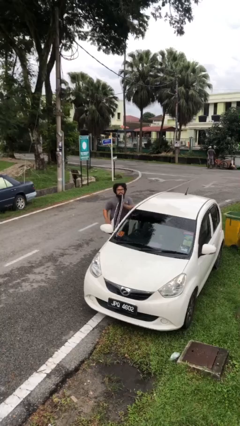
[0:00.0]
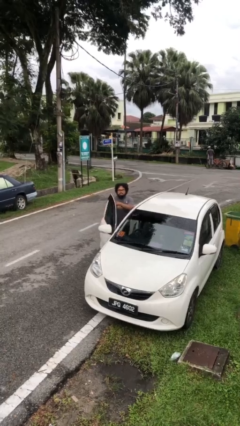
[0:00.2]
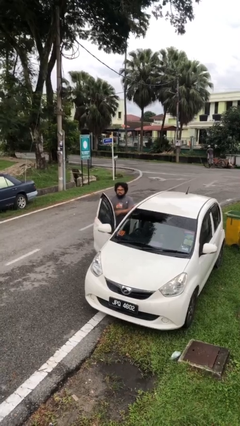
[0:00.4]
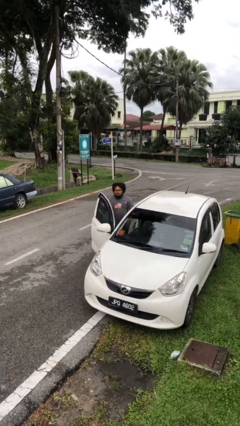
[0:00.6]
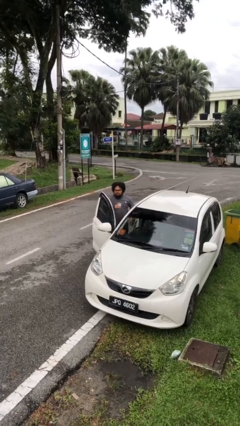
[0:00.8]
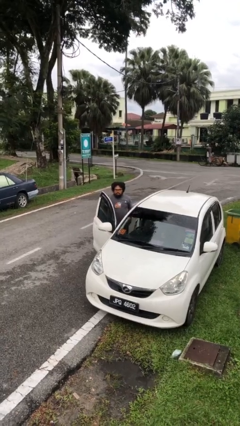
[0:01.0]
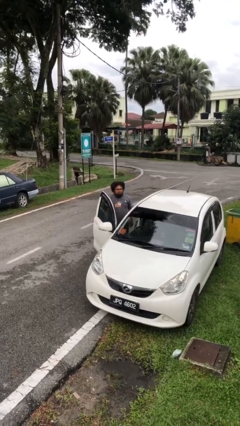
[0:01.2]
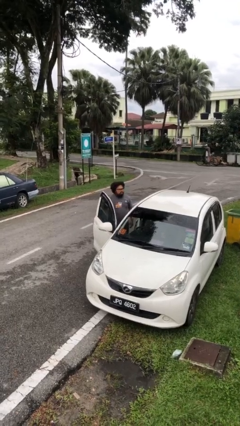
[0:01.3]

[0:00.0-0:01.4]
person opens car door

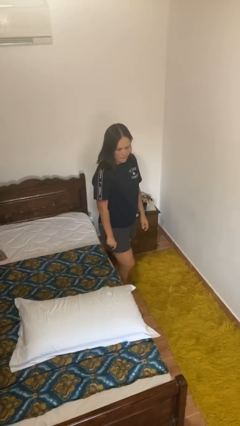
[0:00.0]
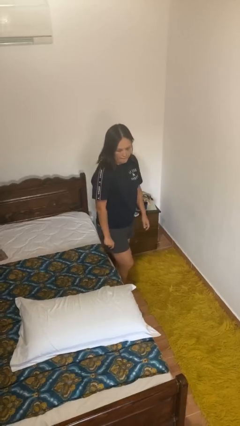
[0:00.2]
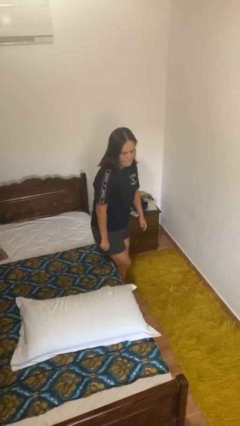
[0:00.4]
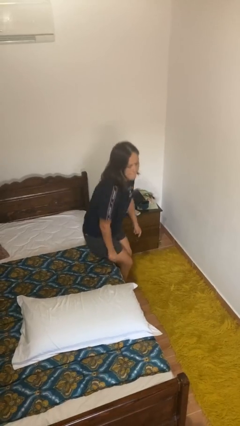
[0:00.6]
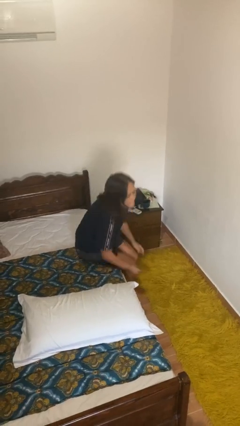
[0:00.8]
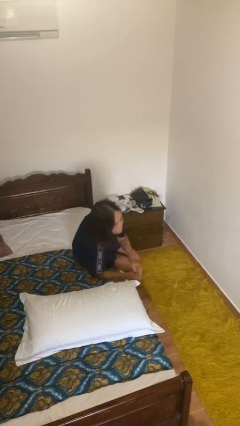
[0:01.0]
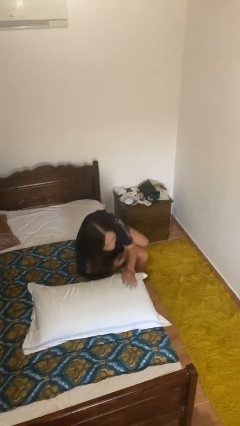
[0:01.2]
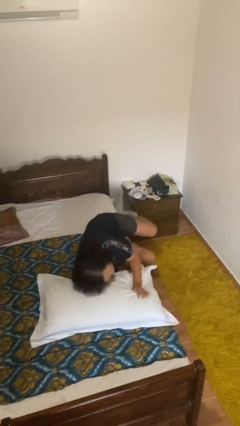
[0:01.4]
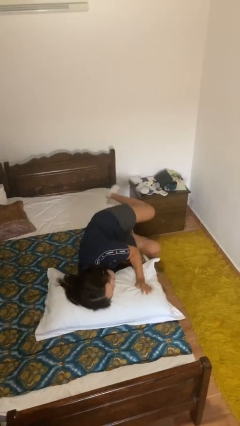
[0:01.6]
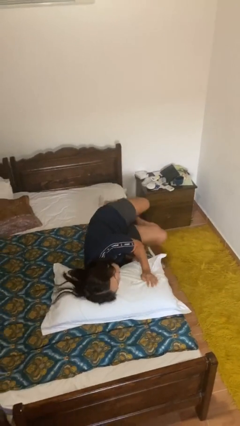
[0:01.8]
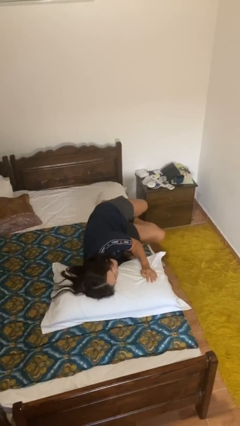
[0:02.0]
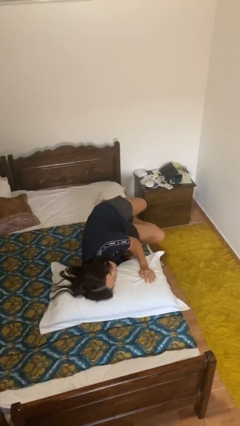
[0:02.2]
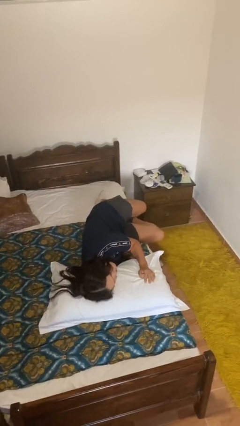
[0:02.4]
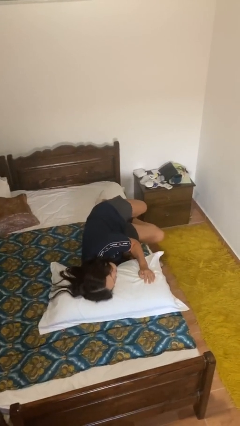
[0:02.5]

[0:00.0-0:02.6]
person lies down on bed

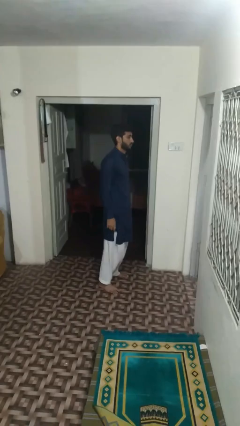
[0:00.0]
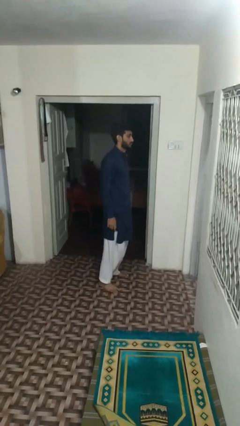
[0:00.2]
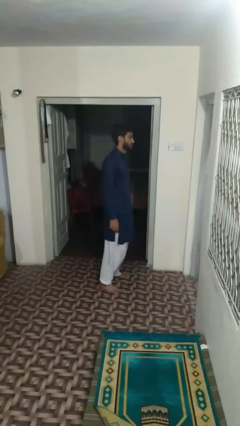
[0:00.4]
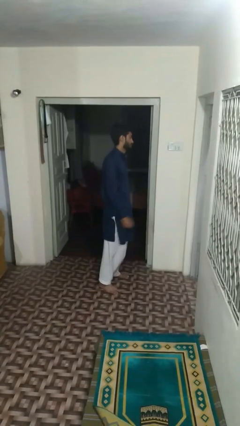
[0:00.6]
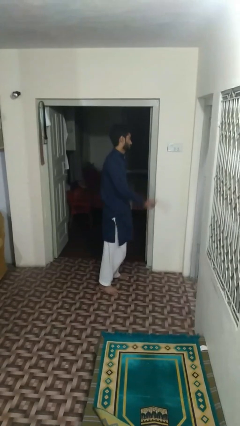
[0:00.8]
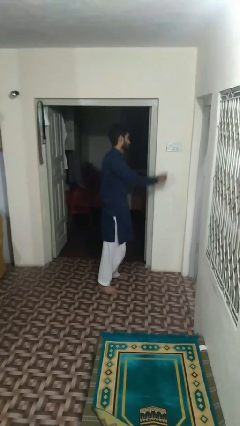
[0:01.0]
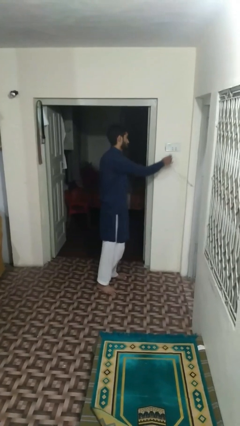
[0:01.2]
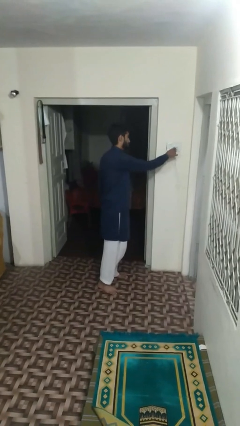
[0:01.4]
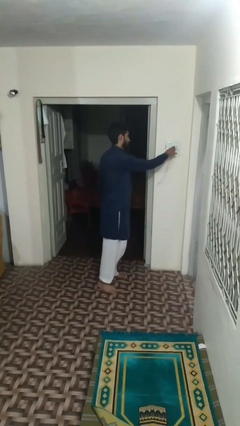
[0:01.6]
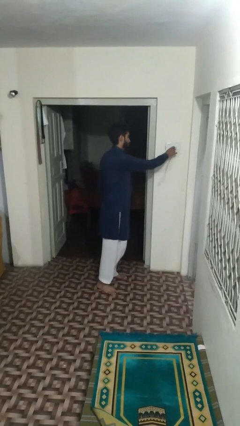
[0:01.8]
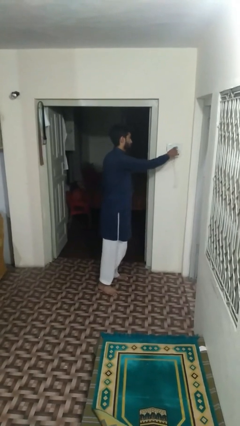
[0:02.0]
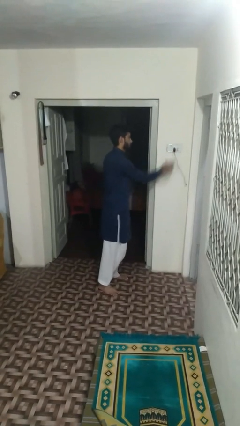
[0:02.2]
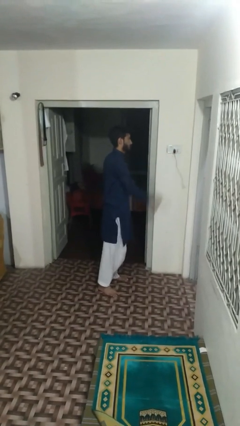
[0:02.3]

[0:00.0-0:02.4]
person plugs into electrical socket

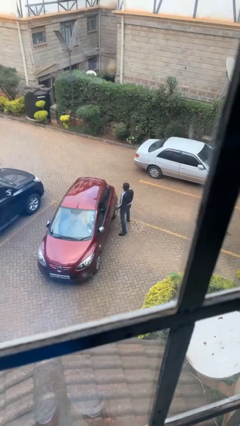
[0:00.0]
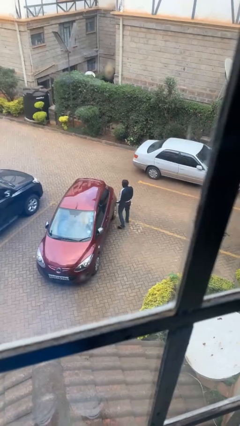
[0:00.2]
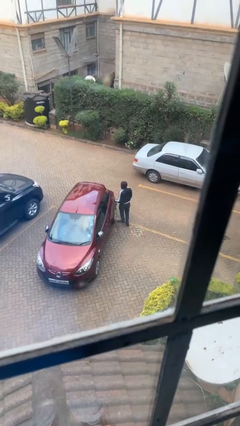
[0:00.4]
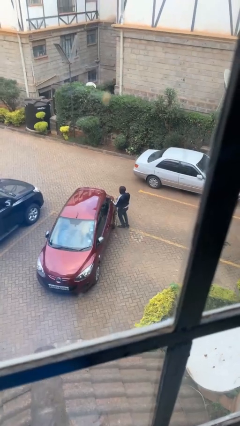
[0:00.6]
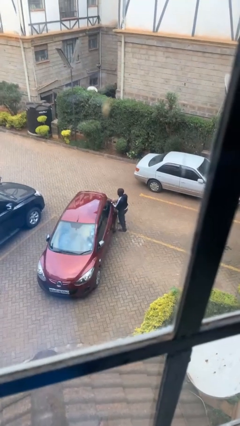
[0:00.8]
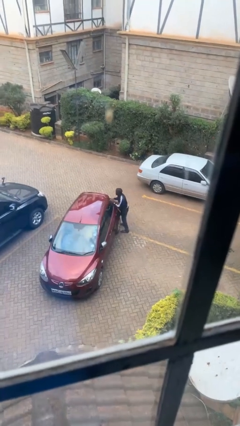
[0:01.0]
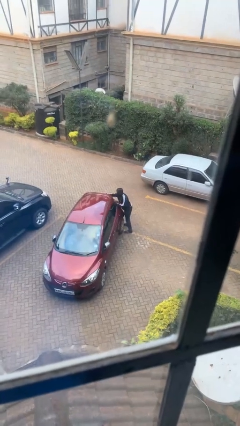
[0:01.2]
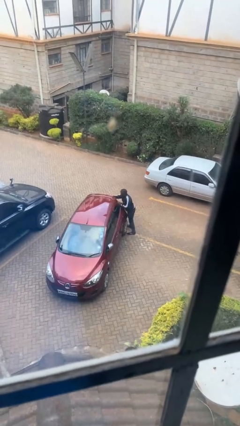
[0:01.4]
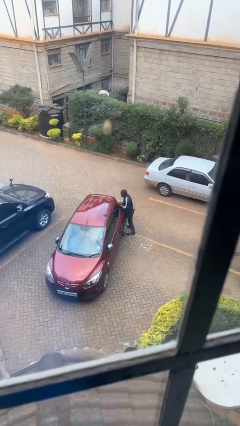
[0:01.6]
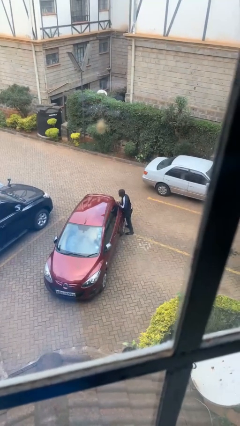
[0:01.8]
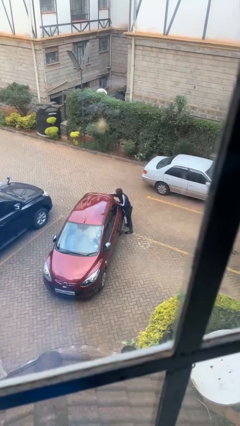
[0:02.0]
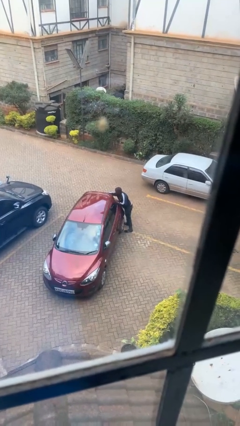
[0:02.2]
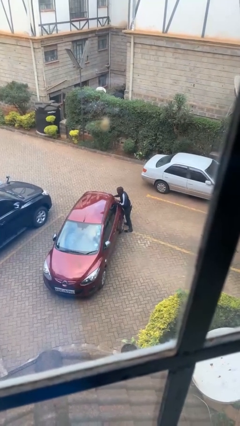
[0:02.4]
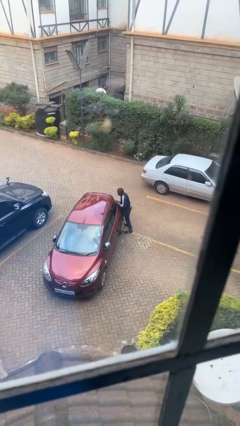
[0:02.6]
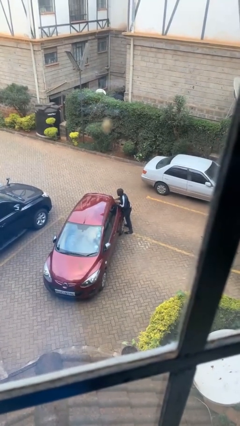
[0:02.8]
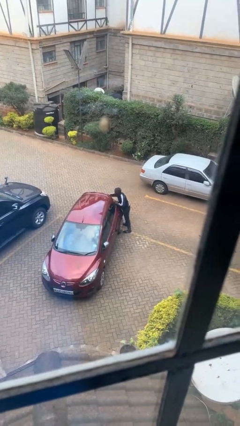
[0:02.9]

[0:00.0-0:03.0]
person polishes car with rag

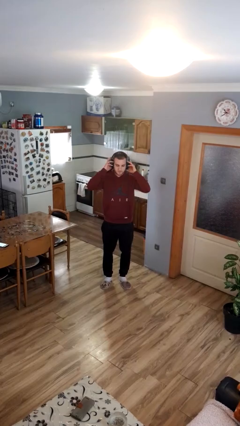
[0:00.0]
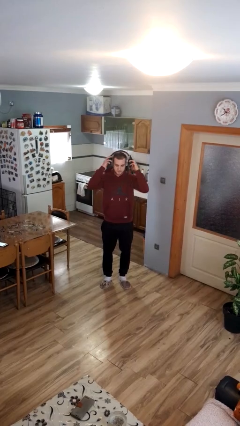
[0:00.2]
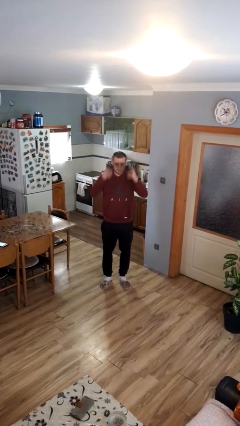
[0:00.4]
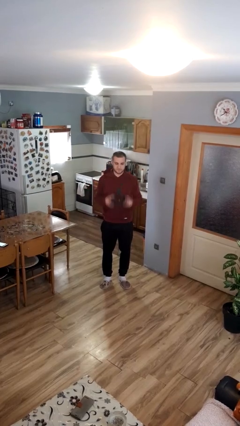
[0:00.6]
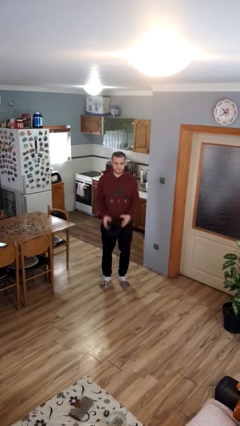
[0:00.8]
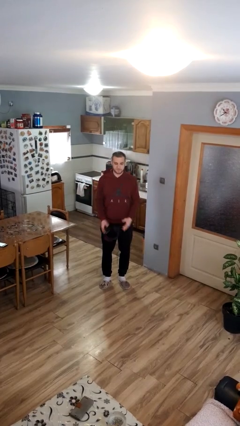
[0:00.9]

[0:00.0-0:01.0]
person takes off headphones

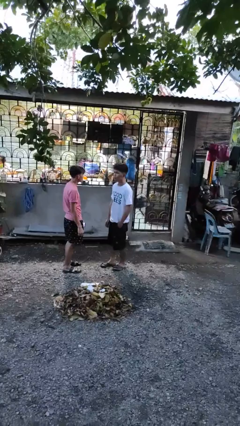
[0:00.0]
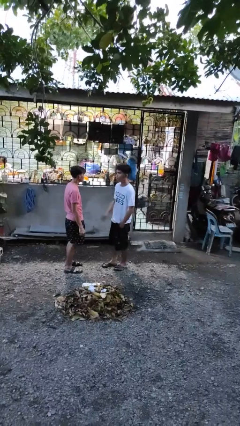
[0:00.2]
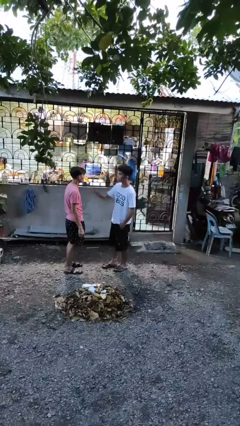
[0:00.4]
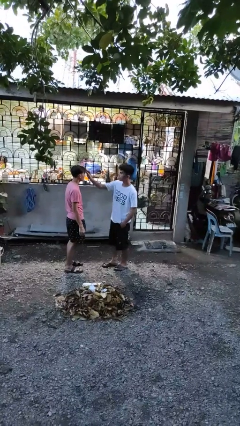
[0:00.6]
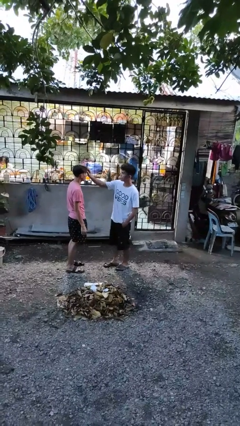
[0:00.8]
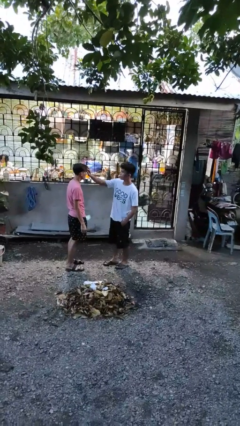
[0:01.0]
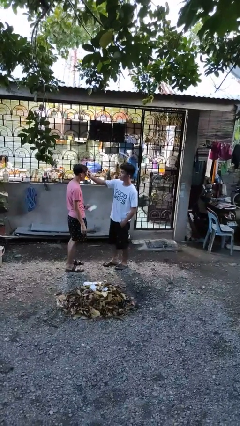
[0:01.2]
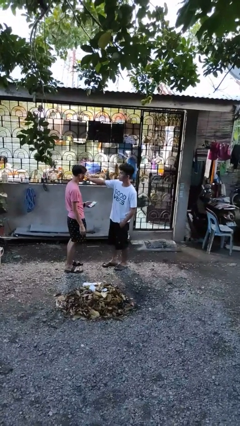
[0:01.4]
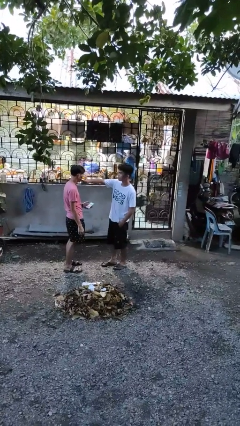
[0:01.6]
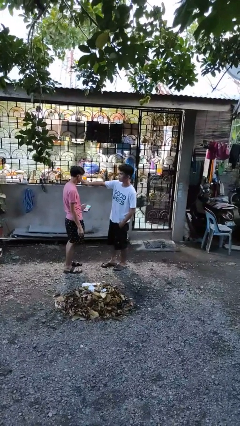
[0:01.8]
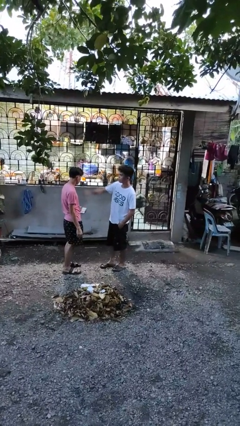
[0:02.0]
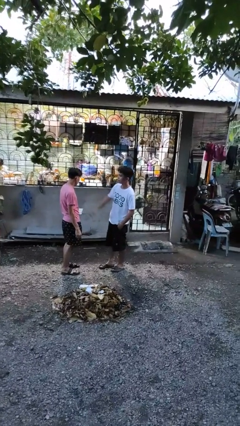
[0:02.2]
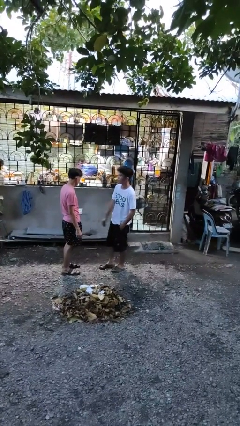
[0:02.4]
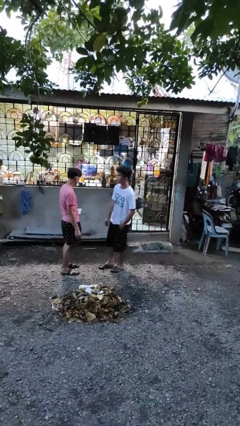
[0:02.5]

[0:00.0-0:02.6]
person touches face of person

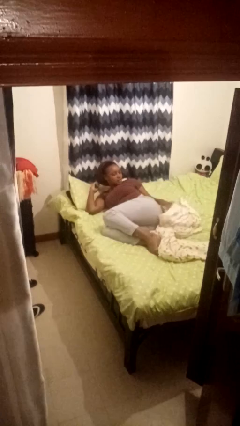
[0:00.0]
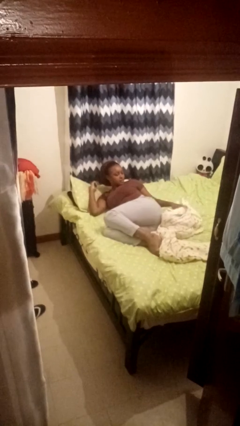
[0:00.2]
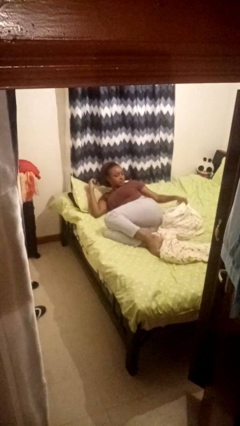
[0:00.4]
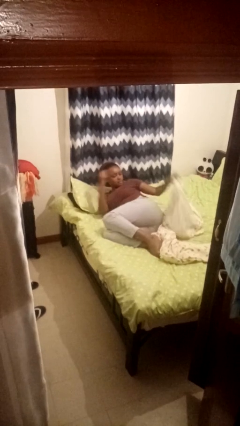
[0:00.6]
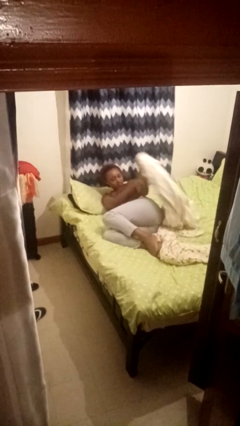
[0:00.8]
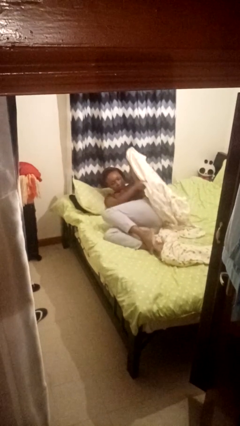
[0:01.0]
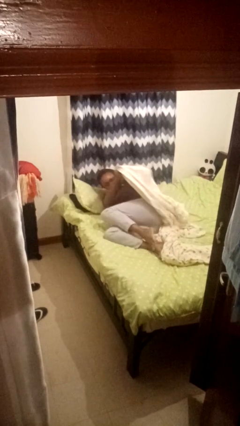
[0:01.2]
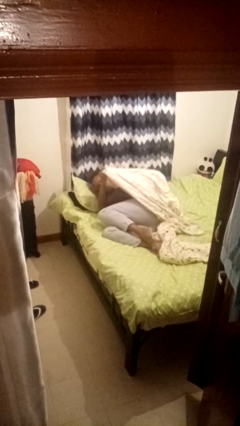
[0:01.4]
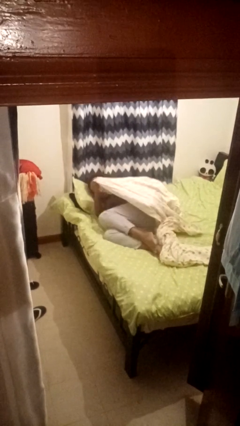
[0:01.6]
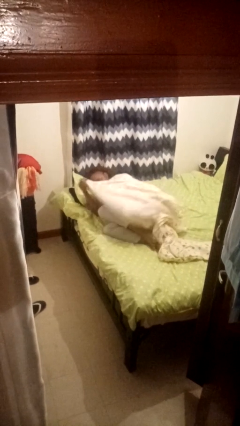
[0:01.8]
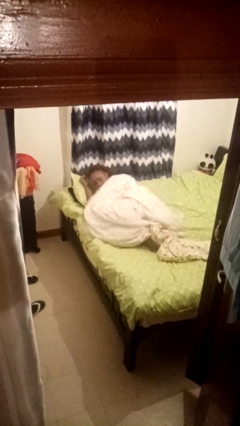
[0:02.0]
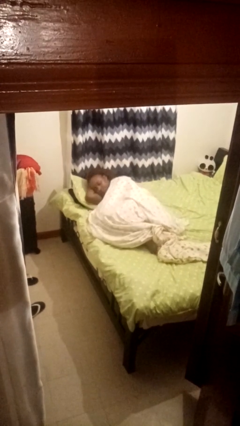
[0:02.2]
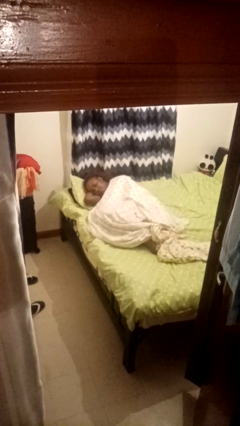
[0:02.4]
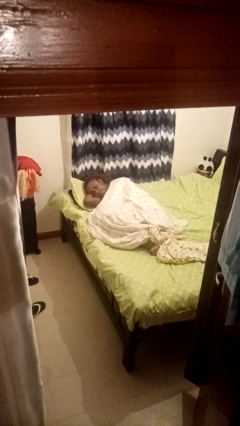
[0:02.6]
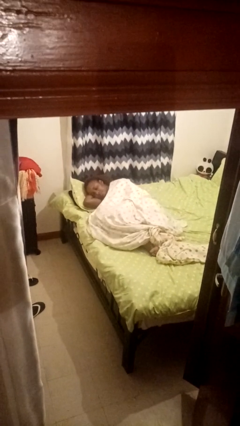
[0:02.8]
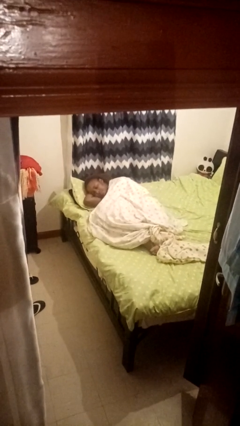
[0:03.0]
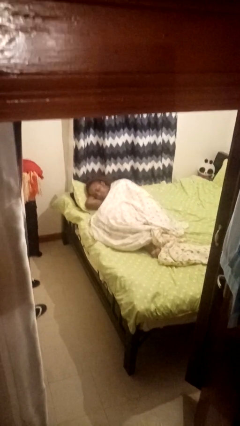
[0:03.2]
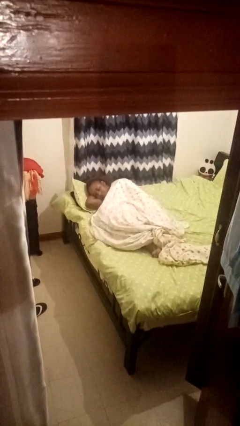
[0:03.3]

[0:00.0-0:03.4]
person covers with bedsheets

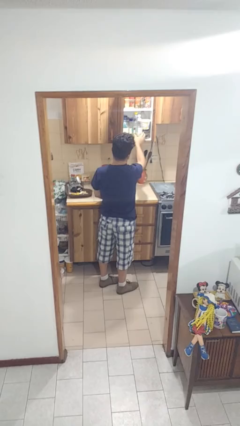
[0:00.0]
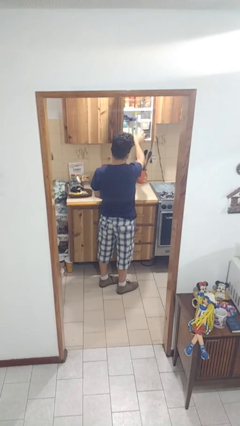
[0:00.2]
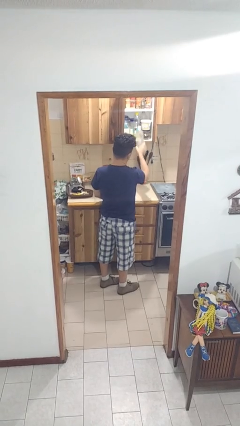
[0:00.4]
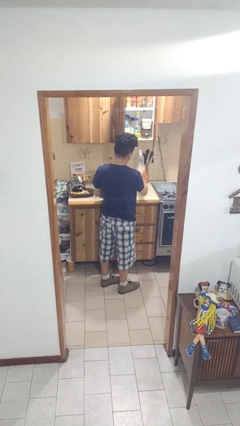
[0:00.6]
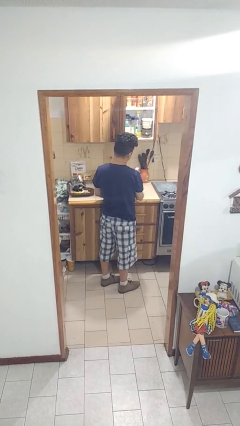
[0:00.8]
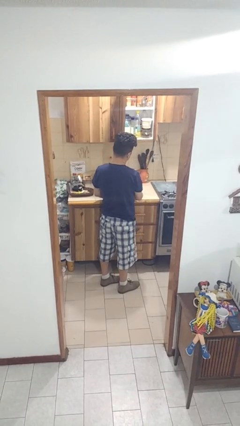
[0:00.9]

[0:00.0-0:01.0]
person takes object from cabinet
